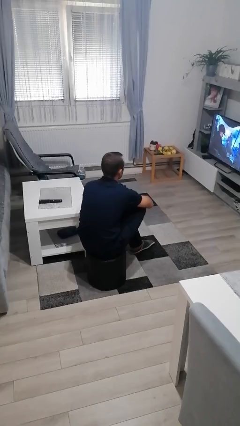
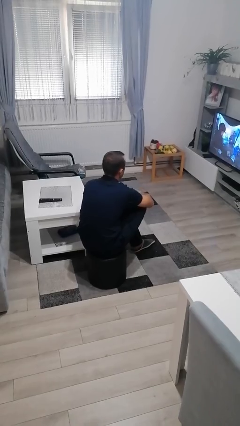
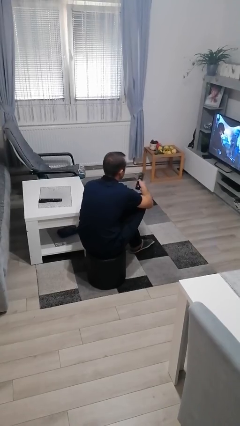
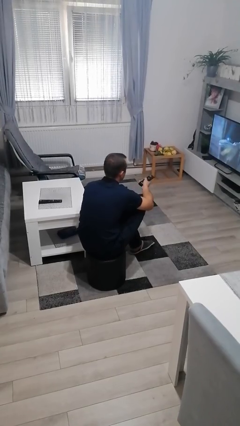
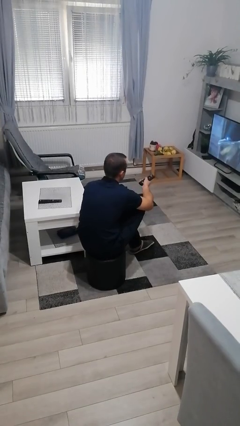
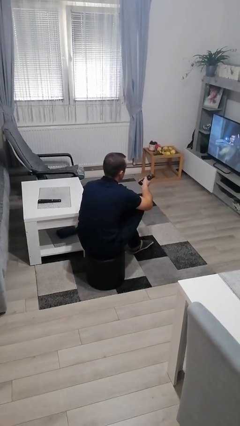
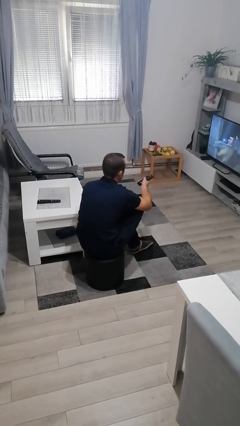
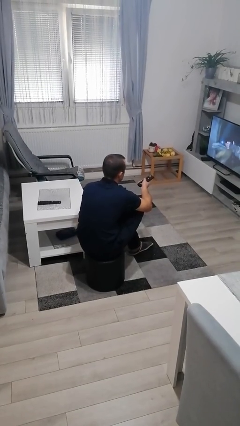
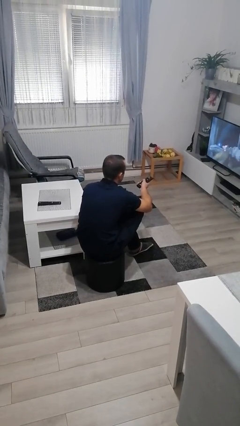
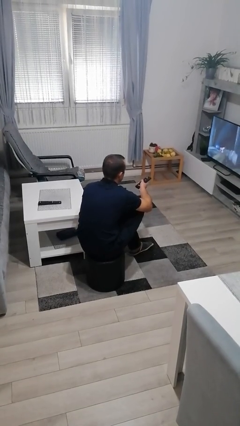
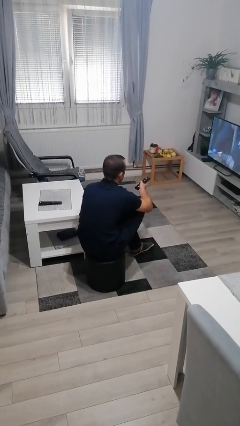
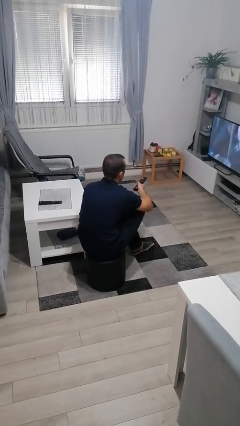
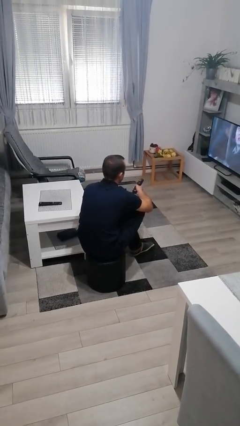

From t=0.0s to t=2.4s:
person uses television remote

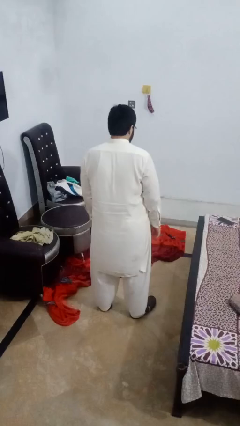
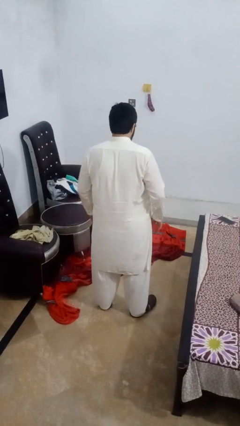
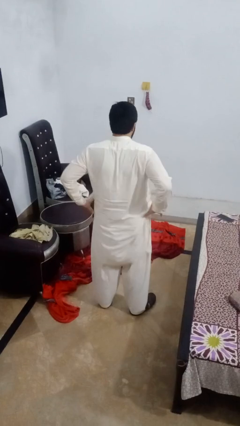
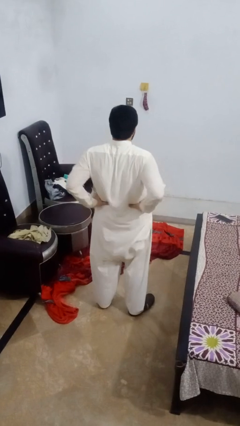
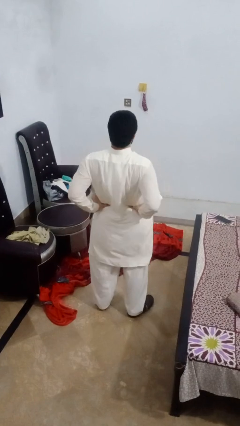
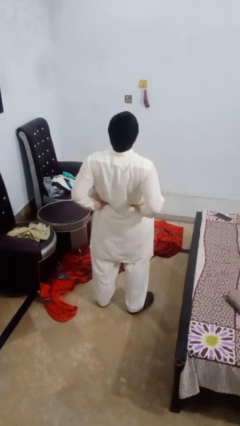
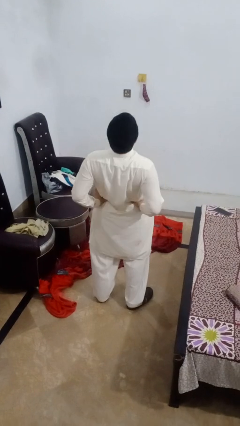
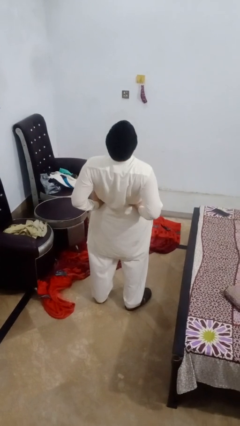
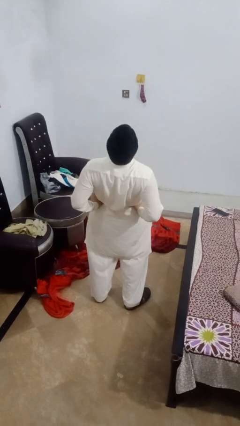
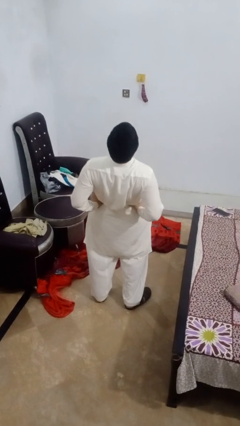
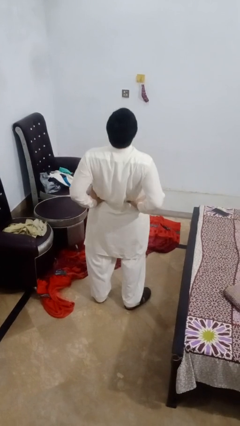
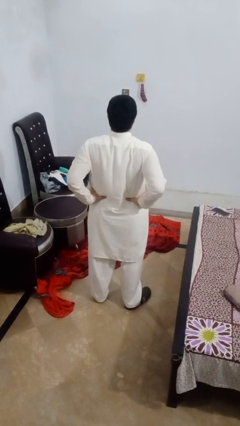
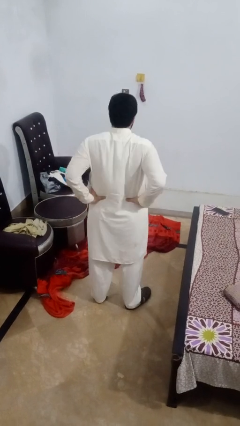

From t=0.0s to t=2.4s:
person stretches back

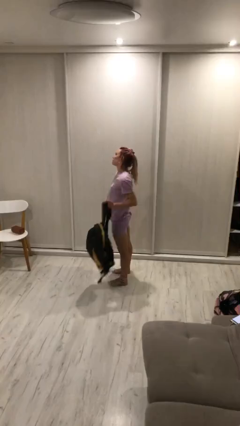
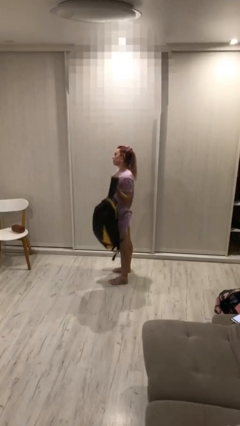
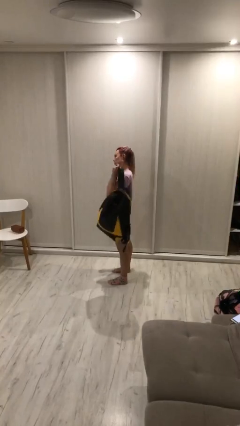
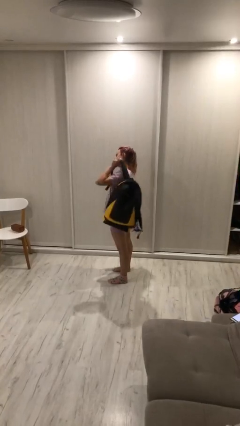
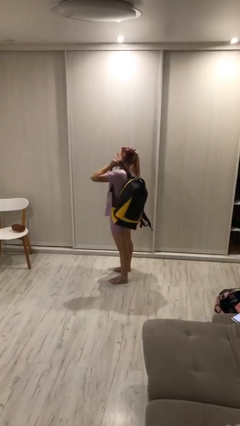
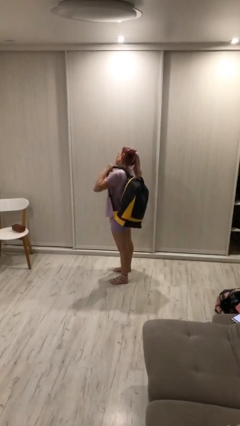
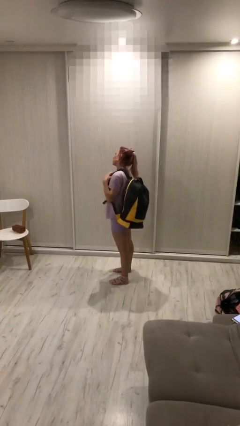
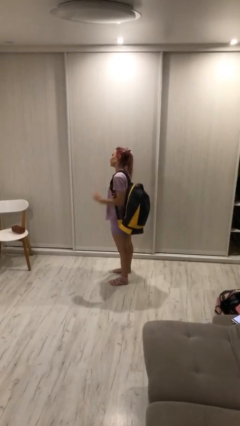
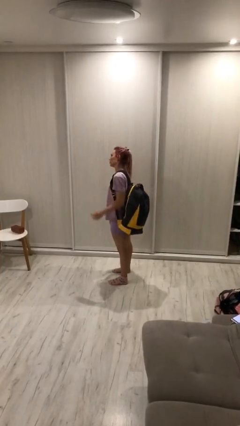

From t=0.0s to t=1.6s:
person puts on backpack

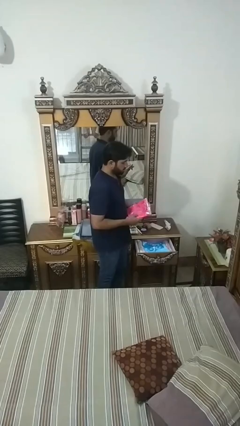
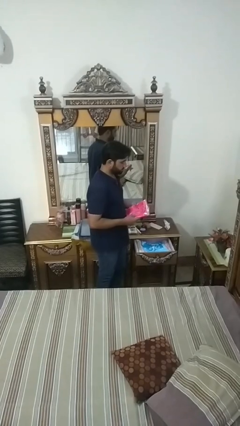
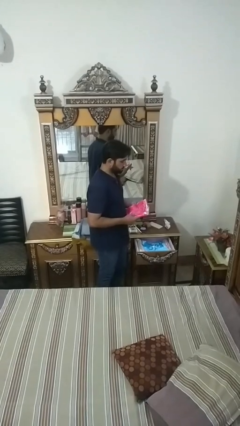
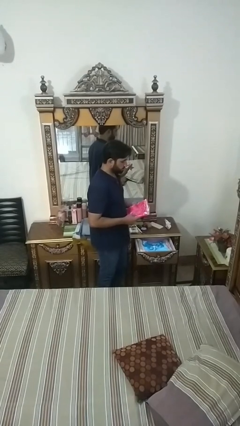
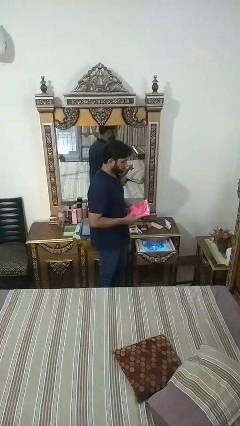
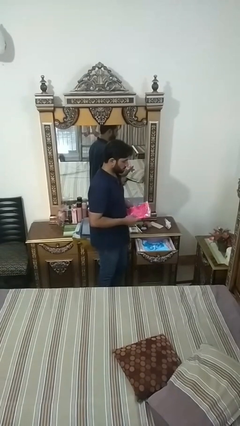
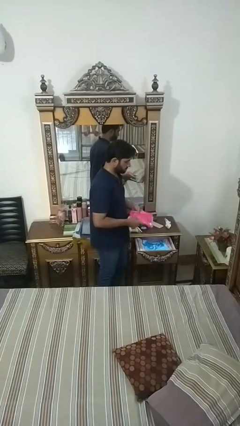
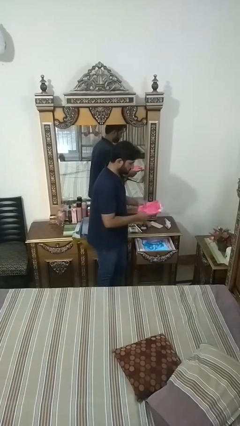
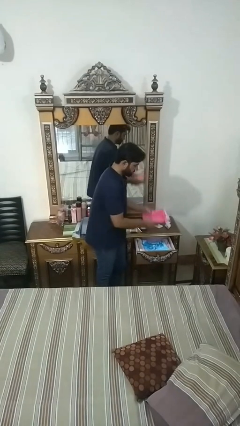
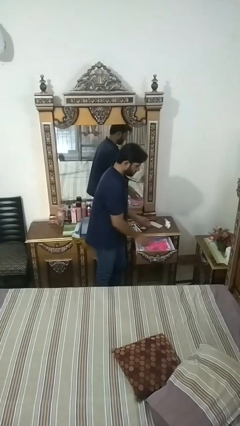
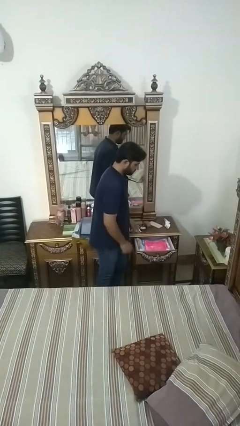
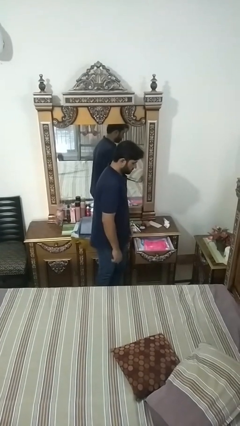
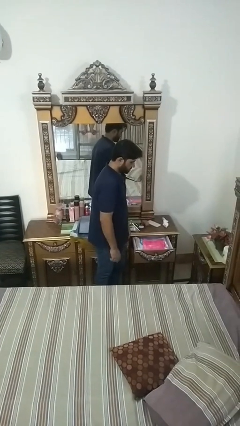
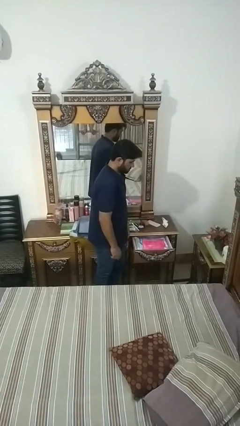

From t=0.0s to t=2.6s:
person puts clothes into dresser

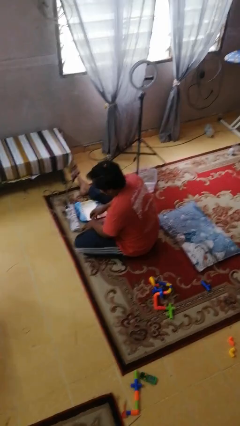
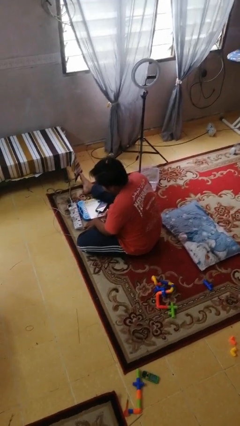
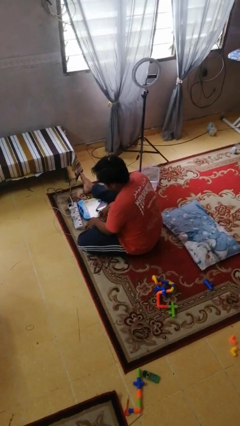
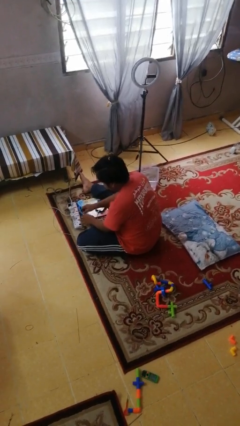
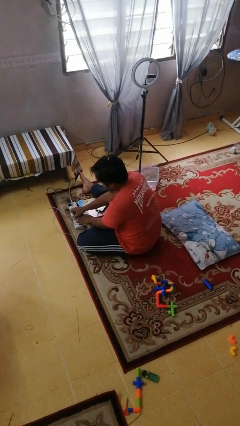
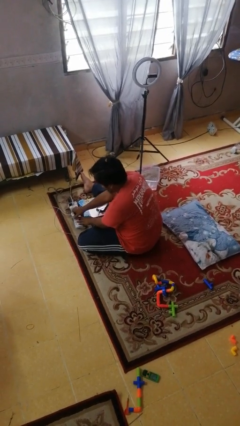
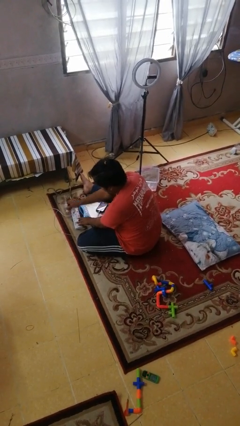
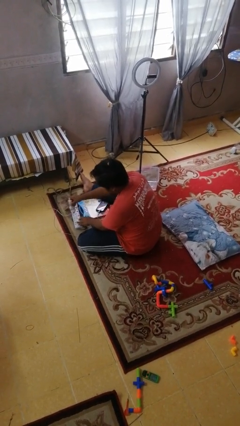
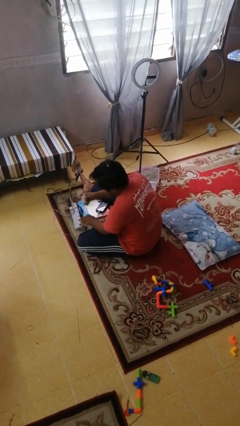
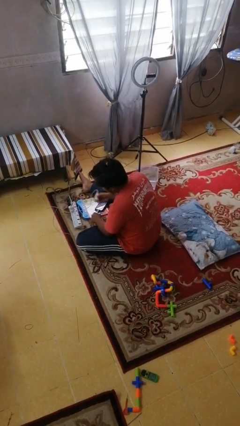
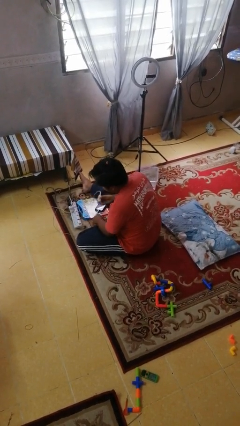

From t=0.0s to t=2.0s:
person unplugs from electrical socket

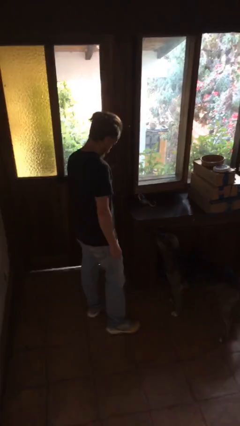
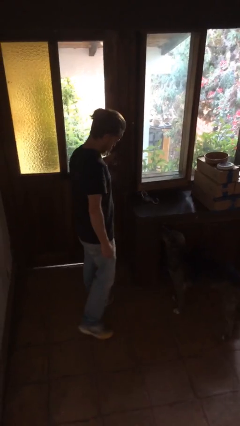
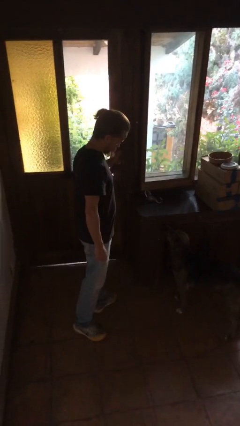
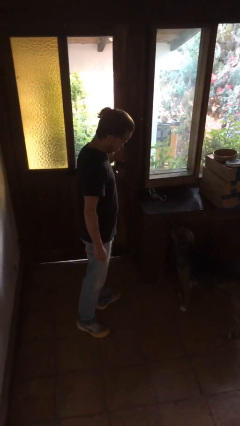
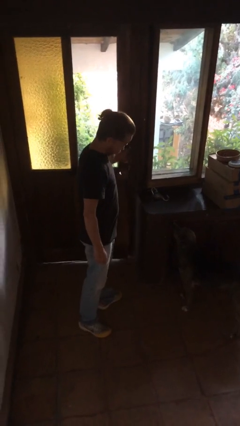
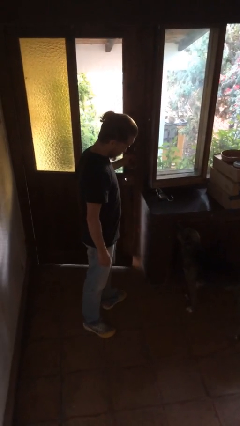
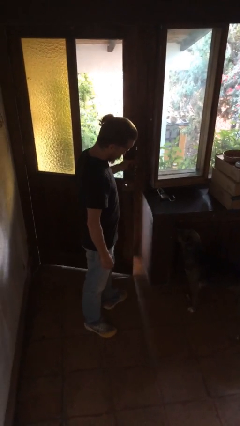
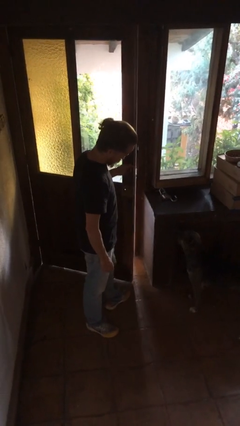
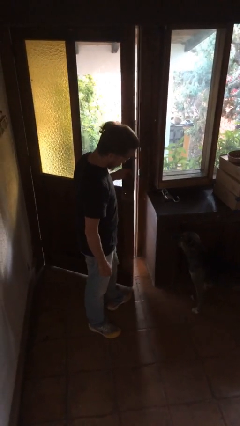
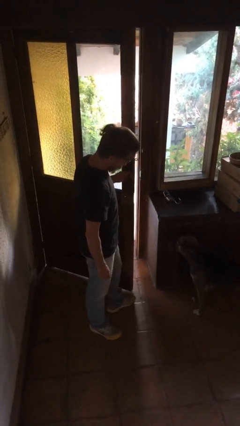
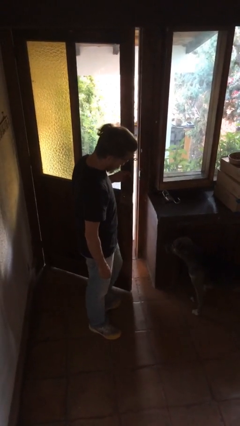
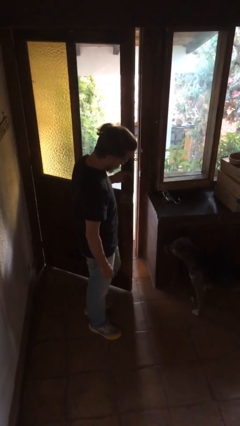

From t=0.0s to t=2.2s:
person opens facility door

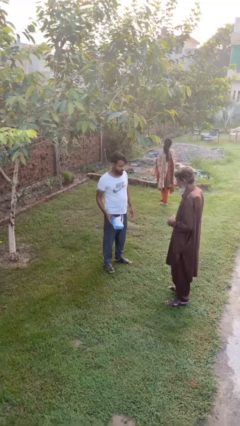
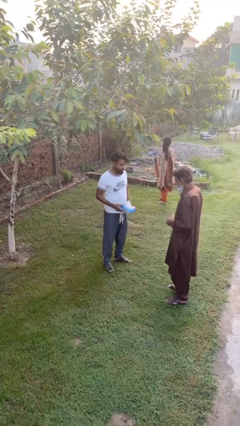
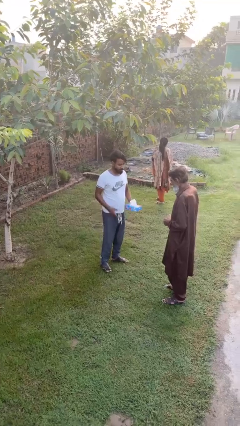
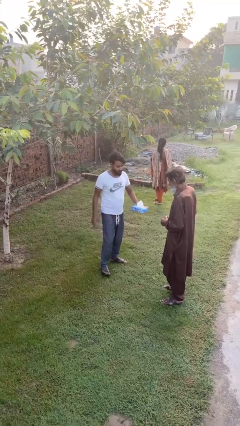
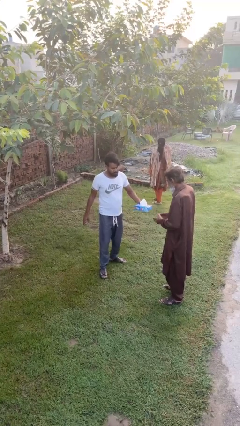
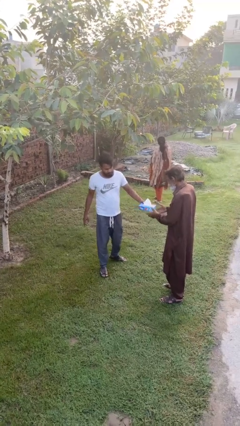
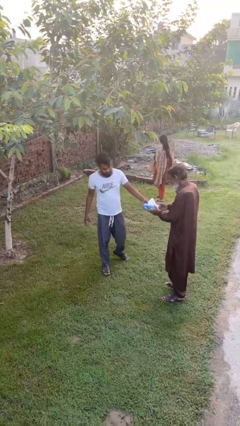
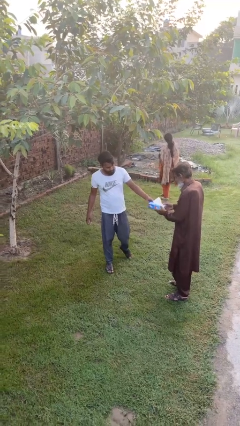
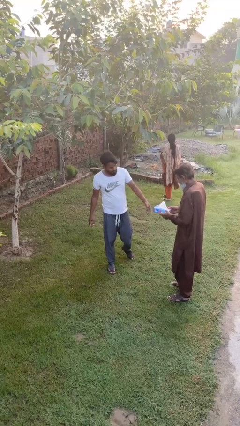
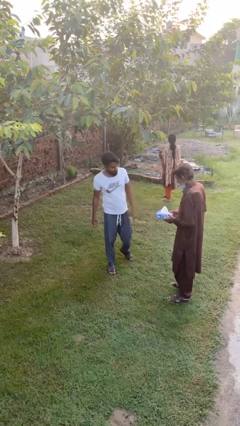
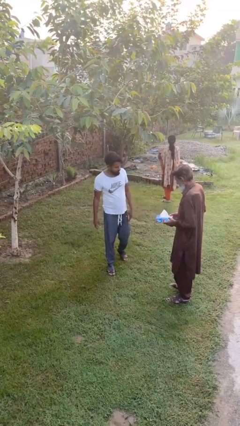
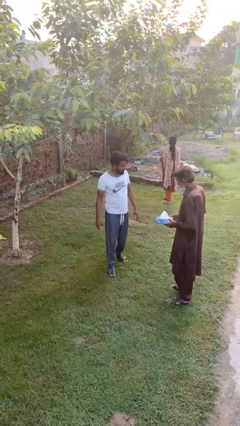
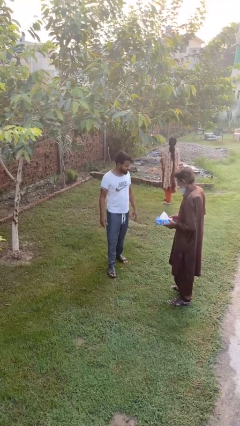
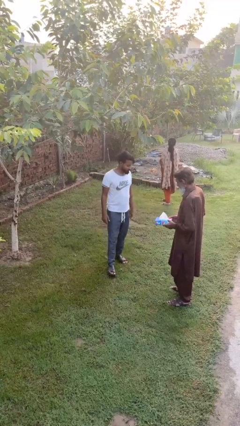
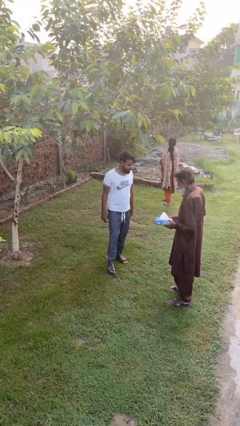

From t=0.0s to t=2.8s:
person transfers object to person

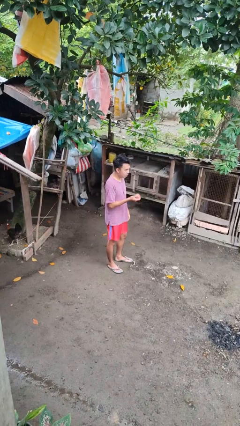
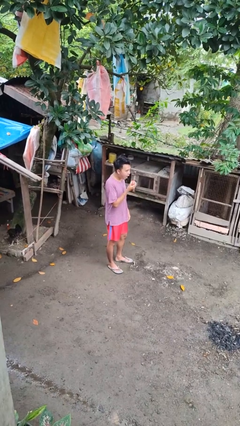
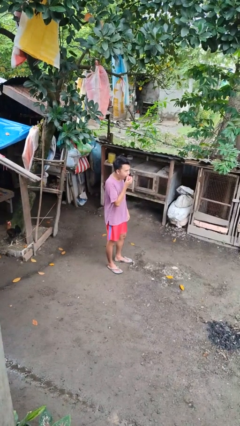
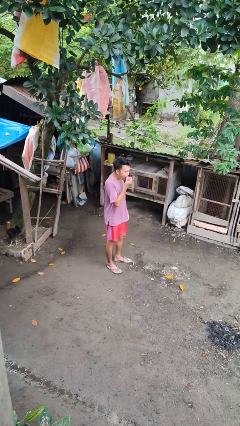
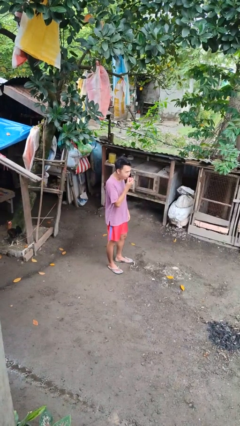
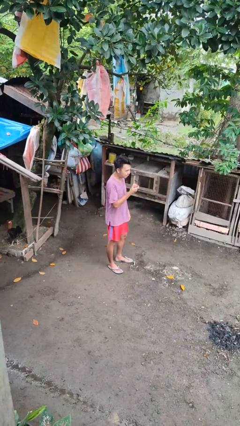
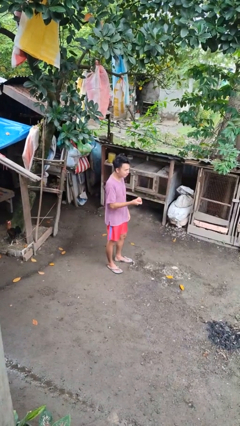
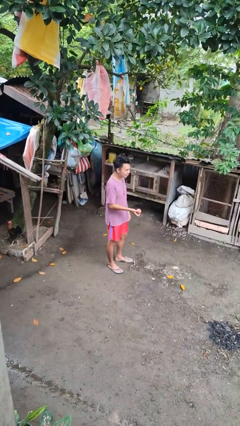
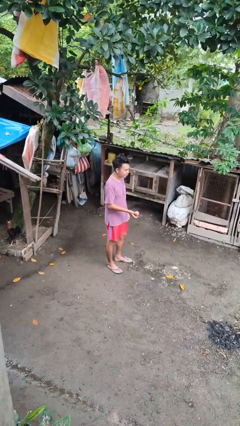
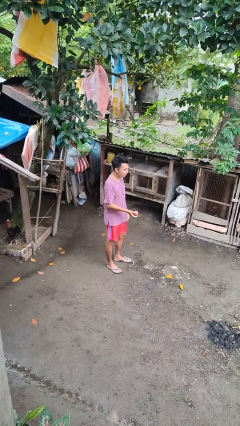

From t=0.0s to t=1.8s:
person eats apple
